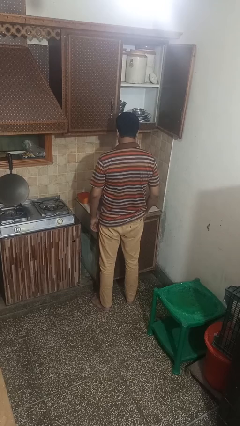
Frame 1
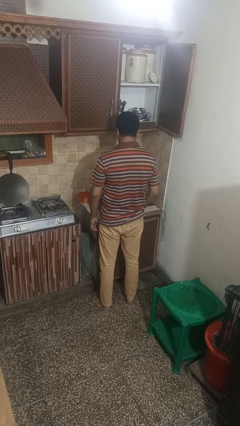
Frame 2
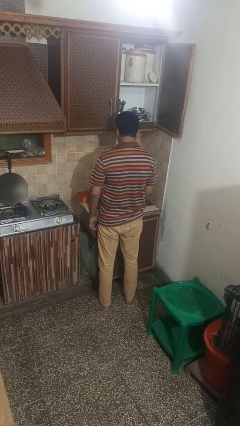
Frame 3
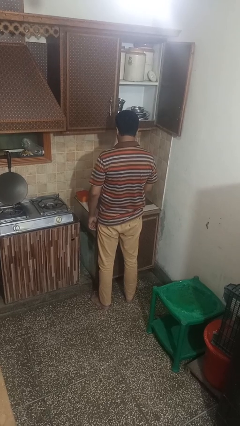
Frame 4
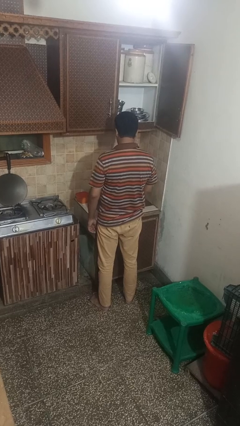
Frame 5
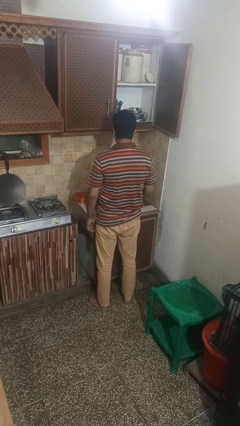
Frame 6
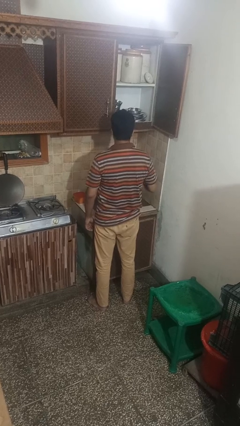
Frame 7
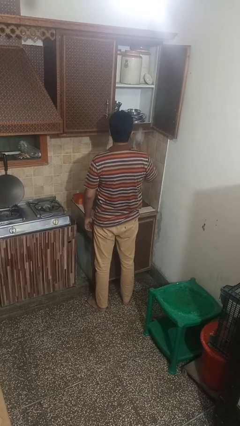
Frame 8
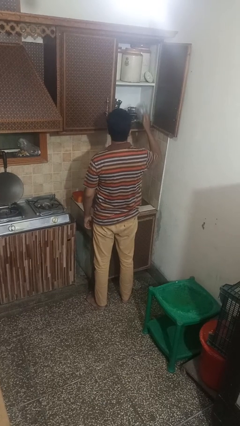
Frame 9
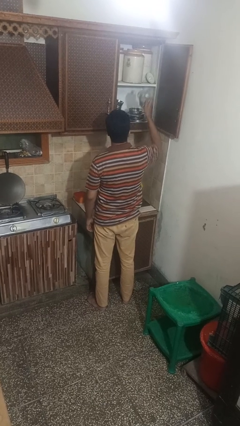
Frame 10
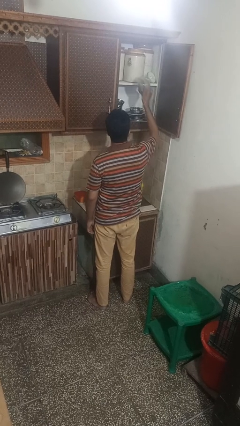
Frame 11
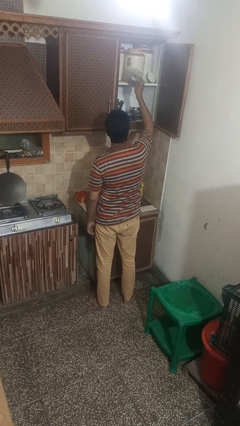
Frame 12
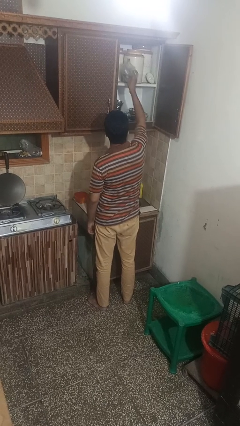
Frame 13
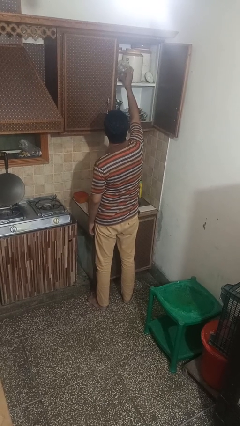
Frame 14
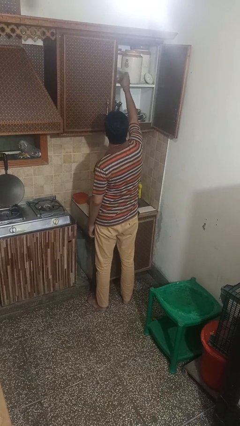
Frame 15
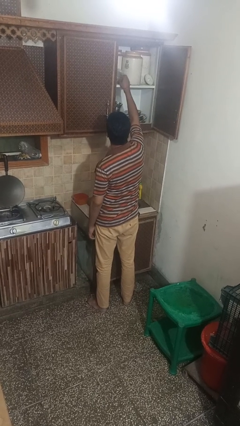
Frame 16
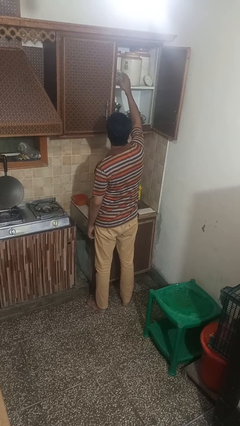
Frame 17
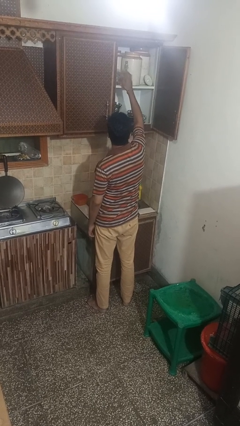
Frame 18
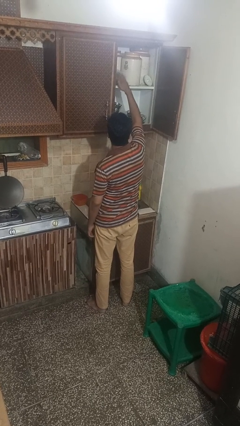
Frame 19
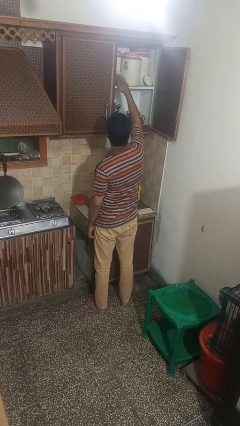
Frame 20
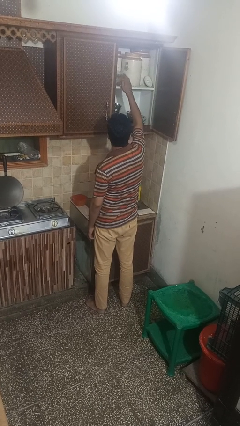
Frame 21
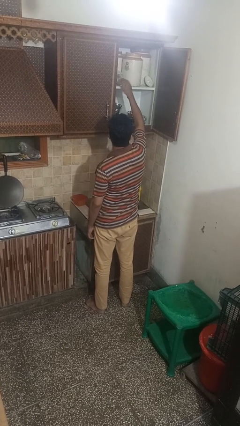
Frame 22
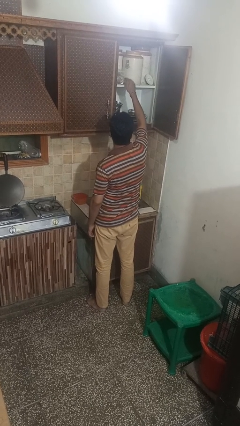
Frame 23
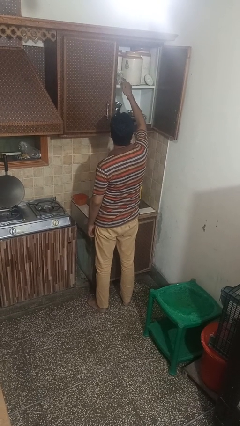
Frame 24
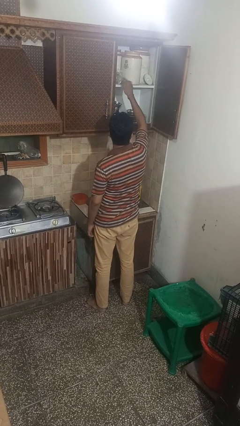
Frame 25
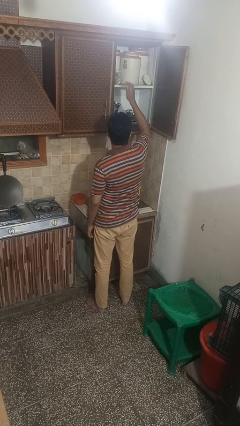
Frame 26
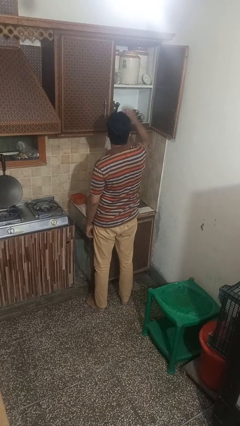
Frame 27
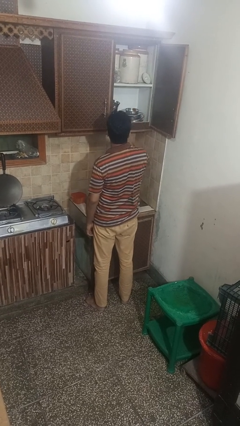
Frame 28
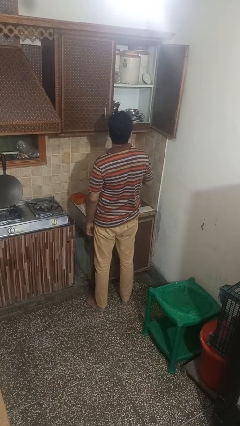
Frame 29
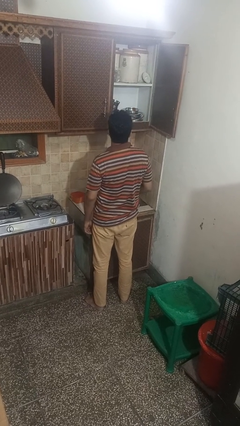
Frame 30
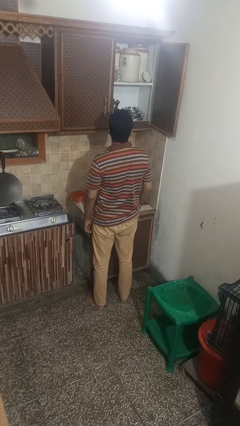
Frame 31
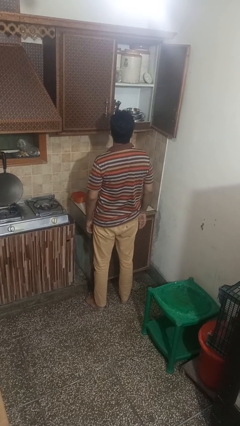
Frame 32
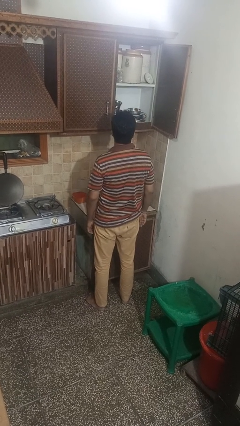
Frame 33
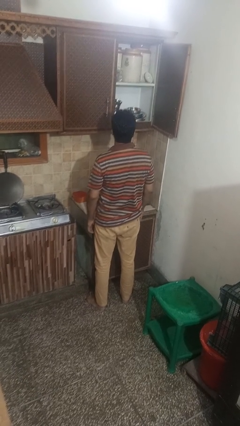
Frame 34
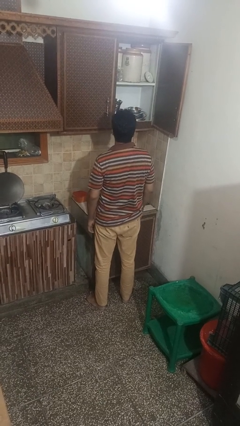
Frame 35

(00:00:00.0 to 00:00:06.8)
person puts object in cabinet

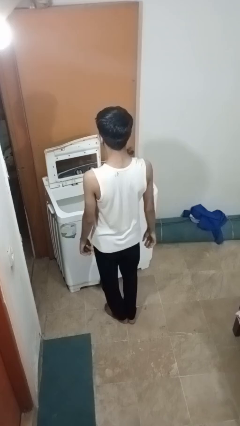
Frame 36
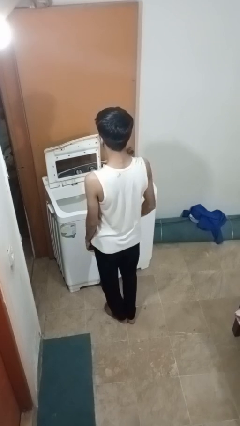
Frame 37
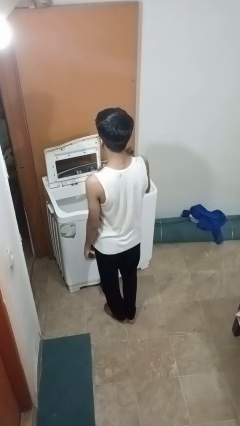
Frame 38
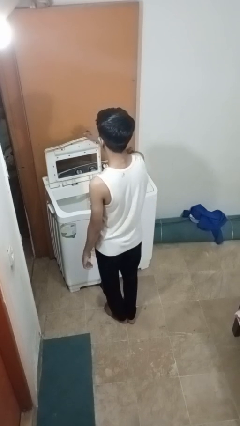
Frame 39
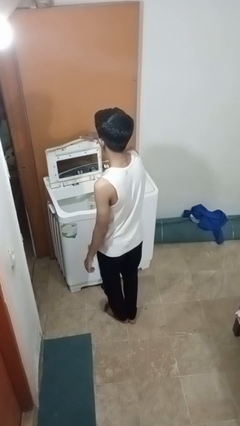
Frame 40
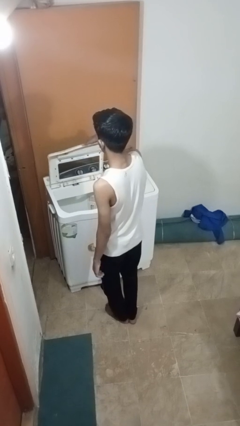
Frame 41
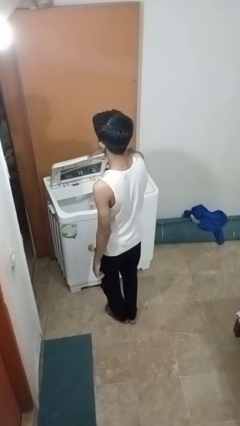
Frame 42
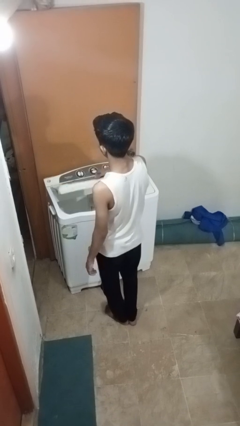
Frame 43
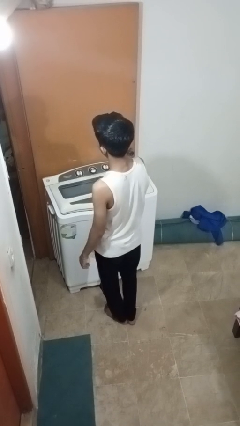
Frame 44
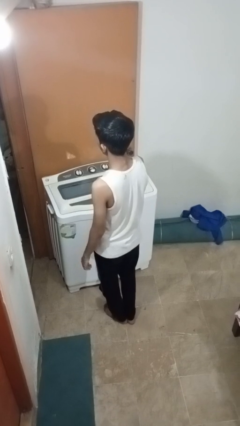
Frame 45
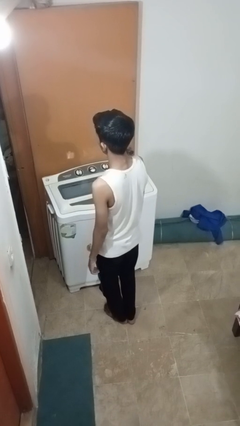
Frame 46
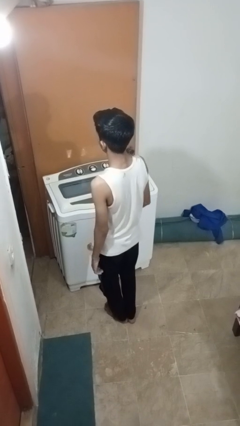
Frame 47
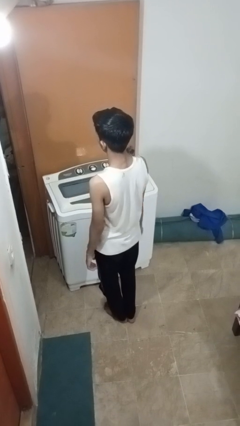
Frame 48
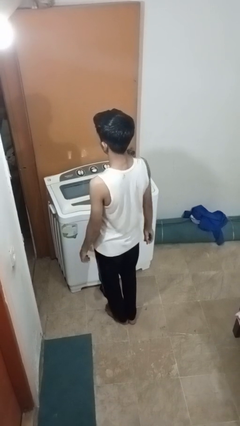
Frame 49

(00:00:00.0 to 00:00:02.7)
person closes clothes washer

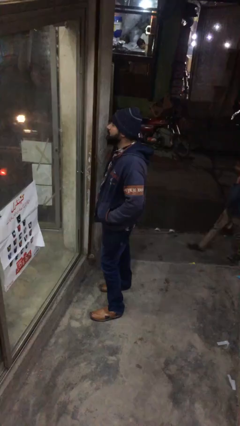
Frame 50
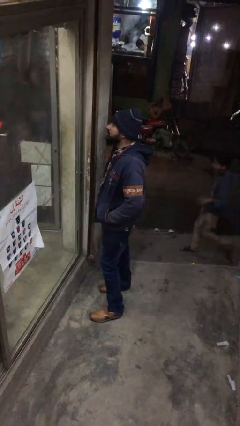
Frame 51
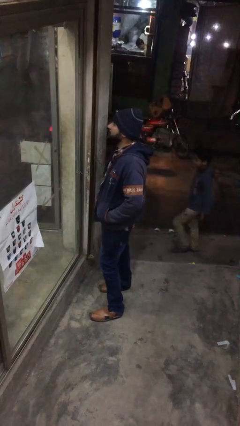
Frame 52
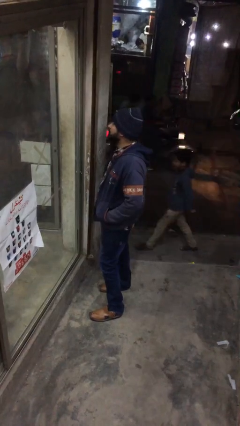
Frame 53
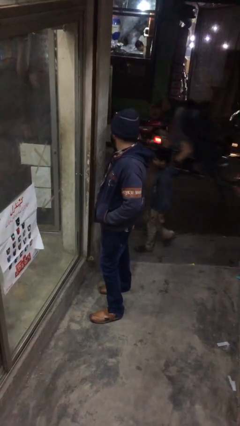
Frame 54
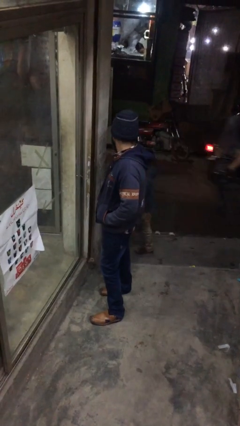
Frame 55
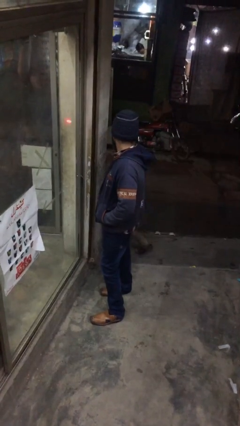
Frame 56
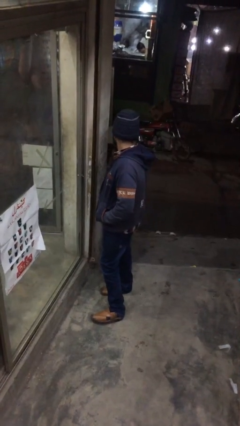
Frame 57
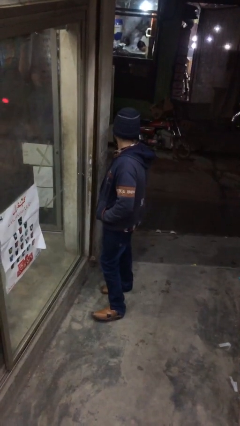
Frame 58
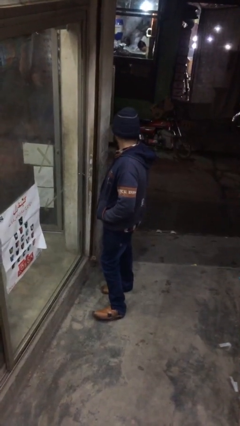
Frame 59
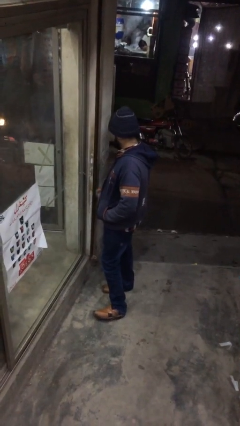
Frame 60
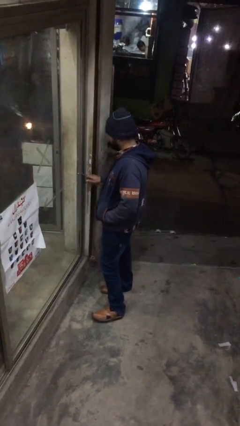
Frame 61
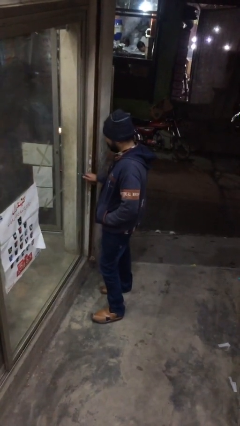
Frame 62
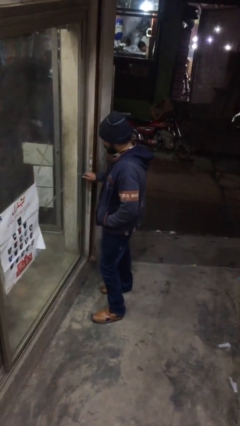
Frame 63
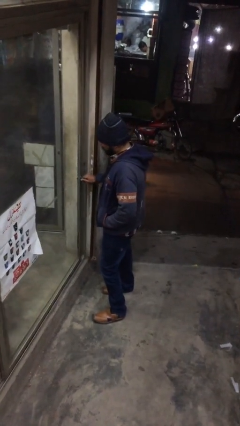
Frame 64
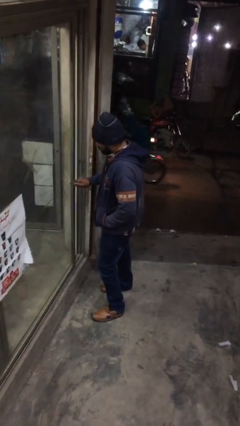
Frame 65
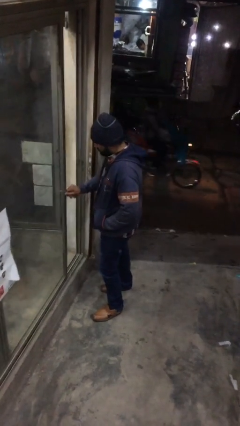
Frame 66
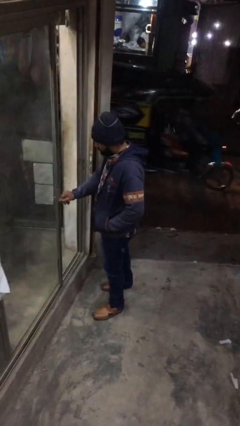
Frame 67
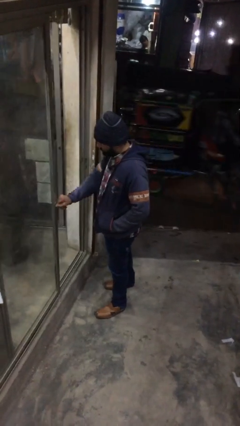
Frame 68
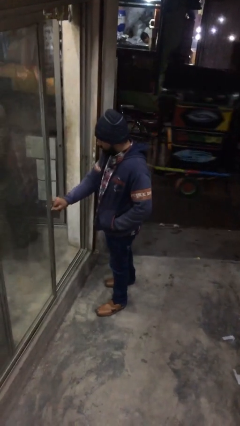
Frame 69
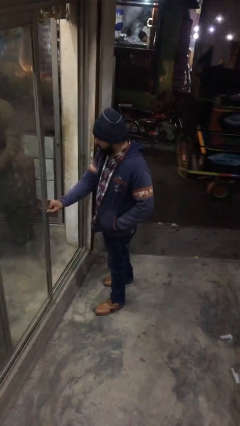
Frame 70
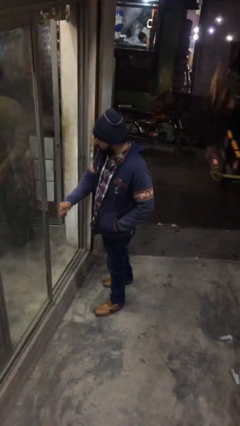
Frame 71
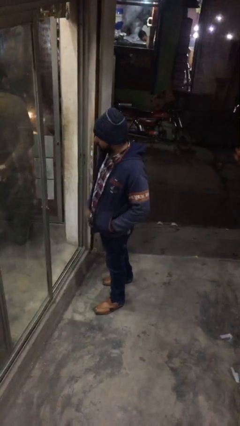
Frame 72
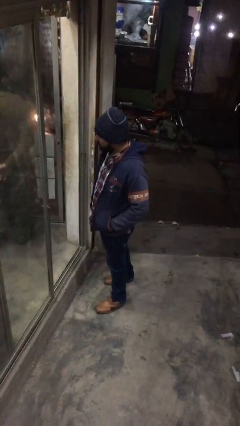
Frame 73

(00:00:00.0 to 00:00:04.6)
person opens facility door

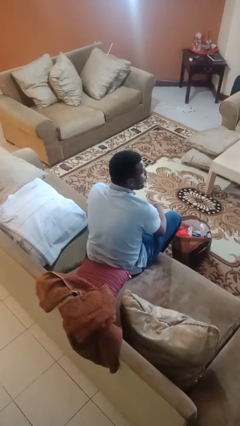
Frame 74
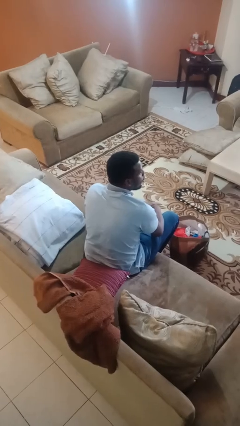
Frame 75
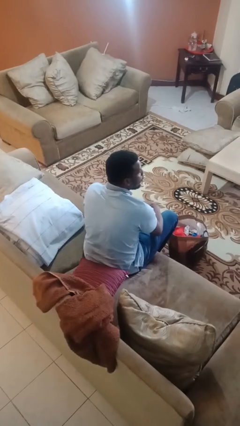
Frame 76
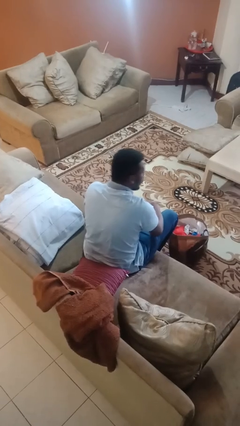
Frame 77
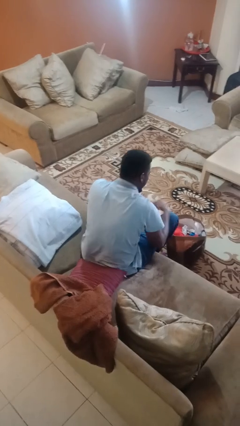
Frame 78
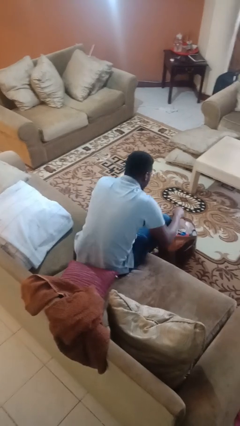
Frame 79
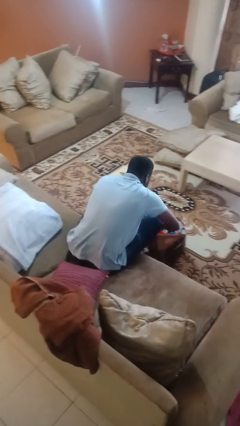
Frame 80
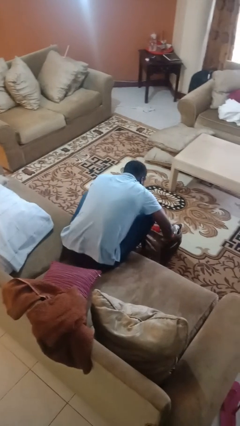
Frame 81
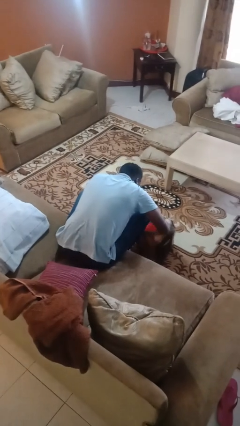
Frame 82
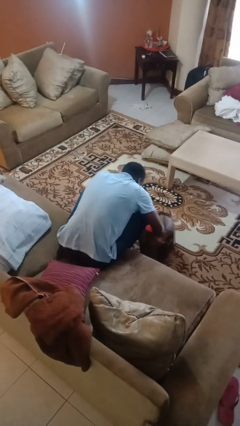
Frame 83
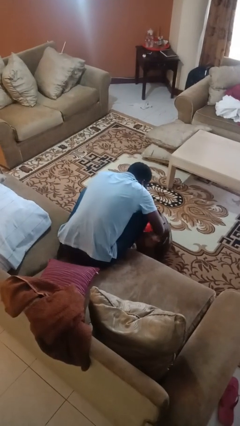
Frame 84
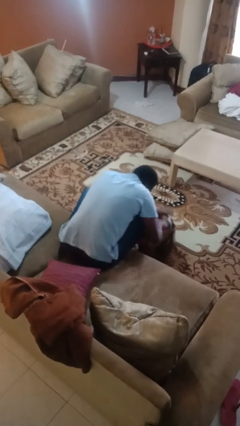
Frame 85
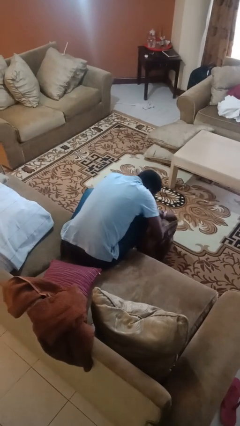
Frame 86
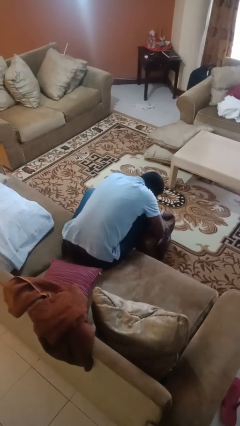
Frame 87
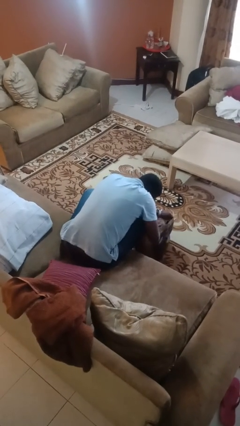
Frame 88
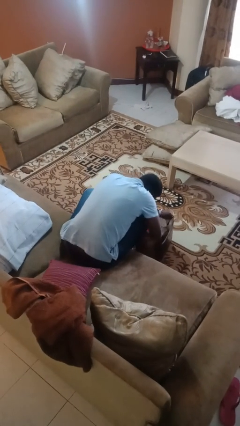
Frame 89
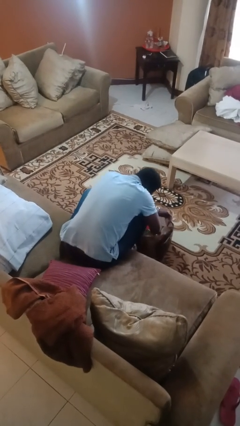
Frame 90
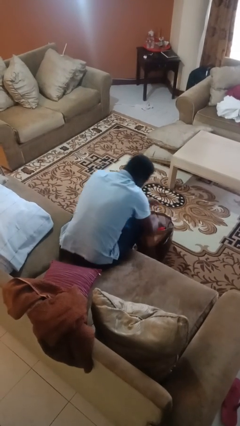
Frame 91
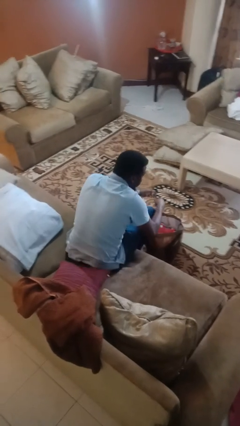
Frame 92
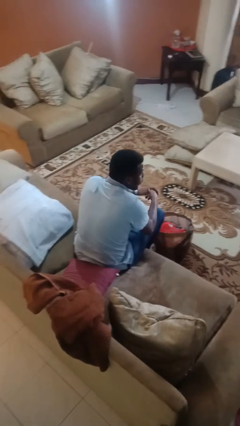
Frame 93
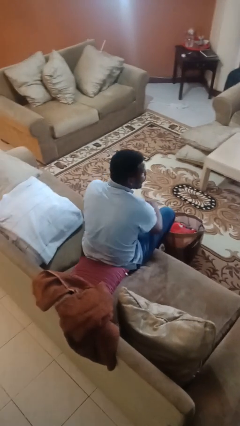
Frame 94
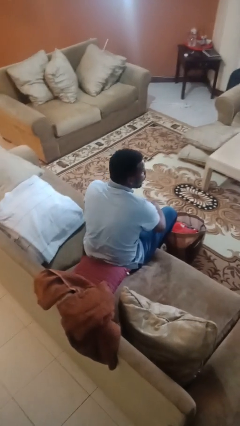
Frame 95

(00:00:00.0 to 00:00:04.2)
person searches in bag
